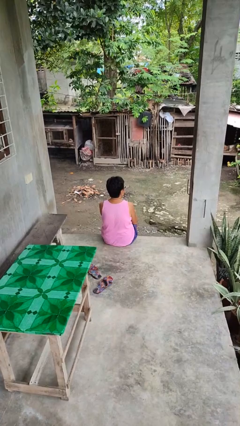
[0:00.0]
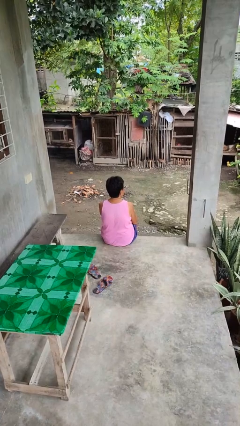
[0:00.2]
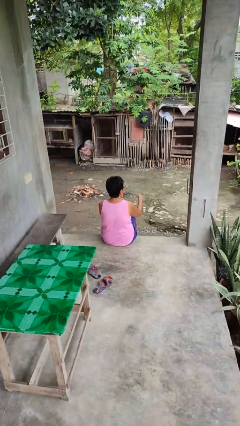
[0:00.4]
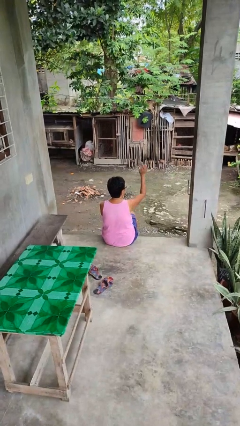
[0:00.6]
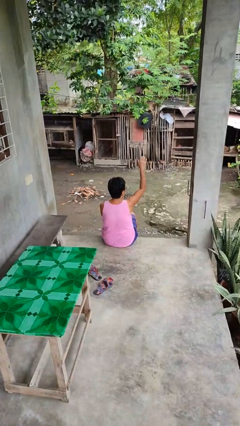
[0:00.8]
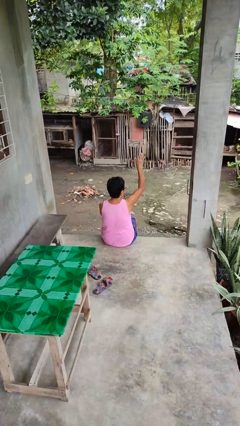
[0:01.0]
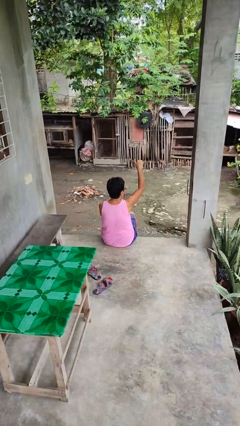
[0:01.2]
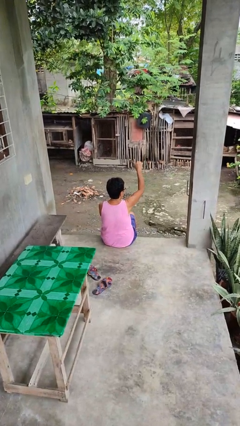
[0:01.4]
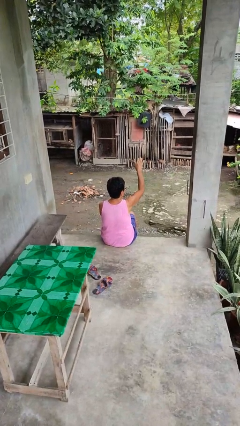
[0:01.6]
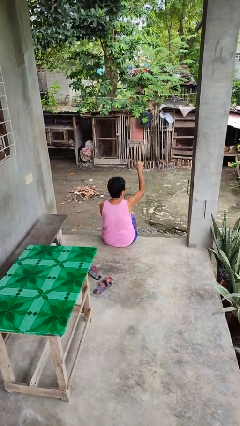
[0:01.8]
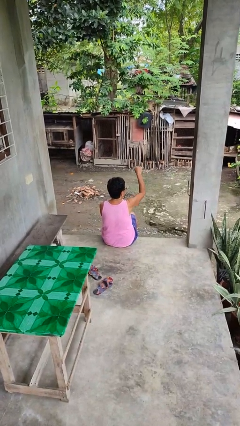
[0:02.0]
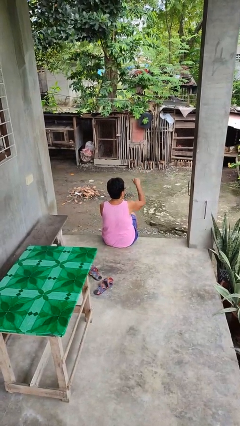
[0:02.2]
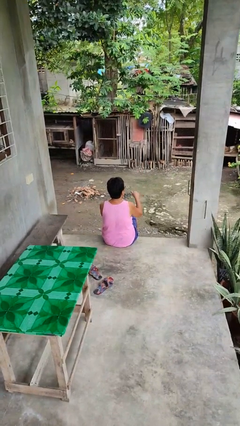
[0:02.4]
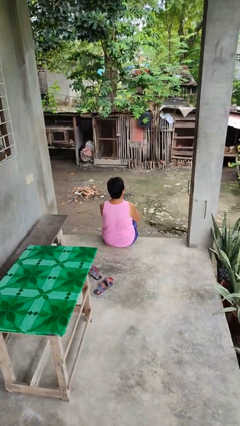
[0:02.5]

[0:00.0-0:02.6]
person gestures come here

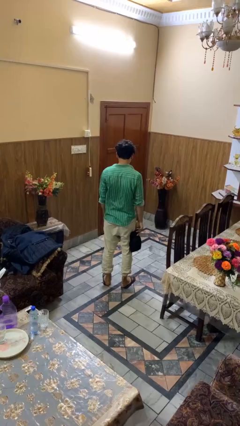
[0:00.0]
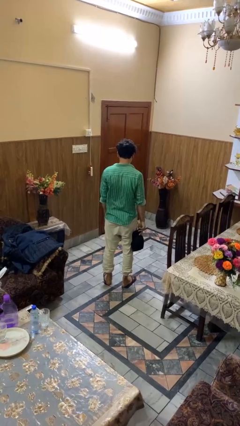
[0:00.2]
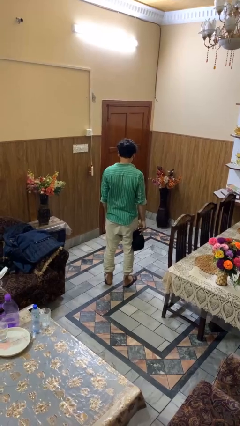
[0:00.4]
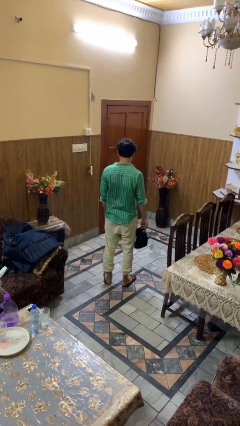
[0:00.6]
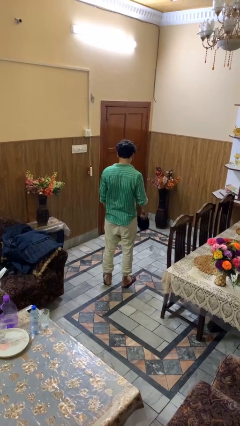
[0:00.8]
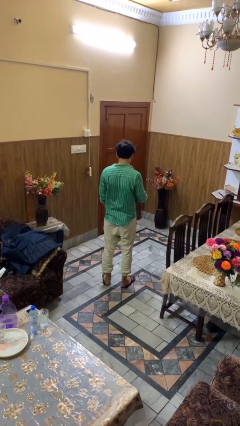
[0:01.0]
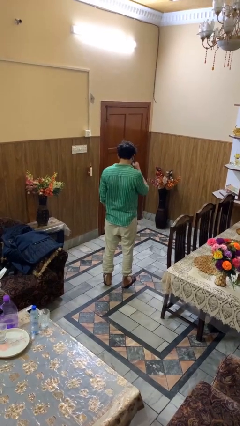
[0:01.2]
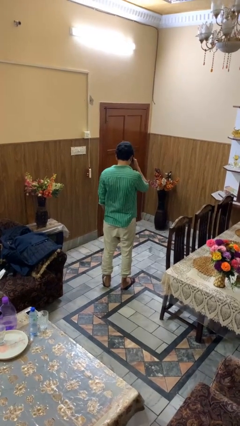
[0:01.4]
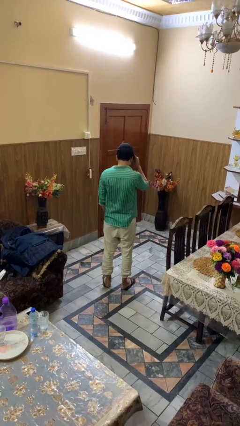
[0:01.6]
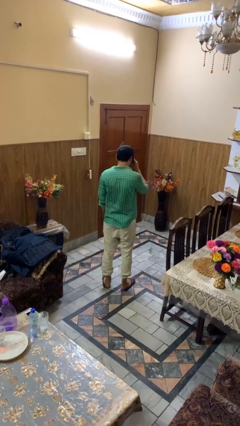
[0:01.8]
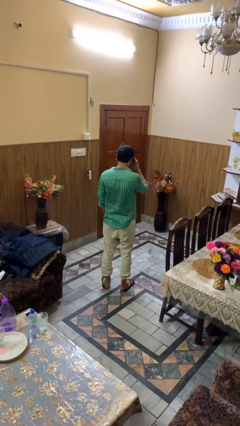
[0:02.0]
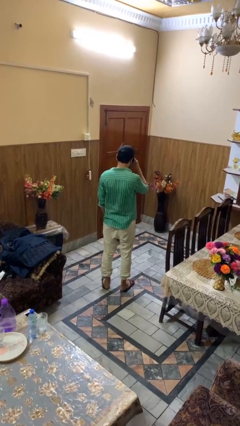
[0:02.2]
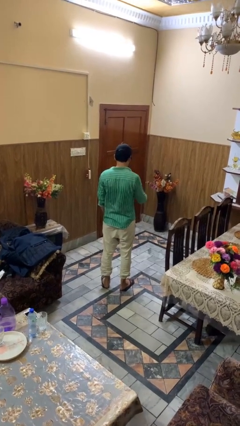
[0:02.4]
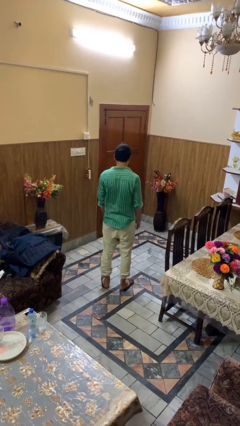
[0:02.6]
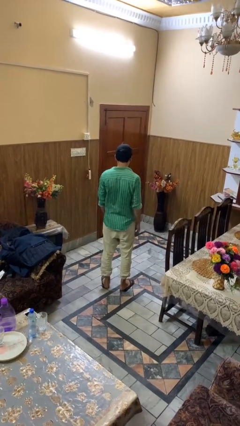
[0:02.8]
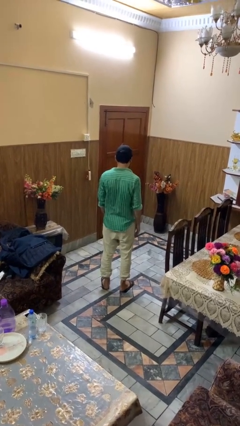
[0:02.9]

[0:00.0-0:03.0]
person puts on hat

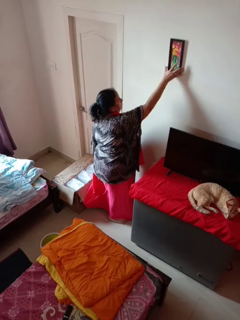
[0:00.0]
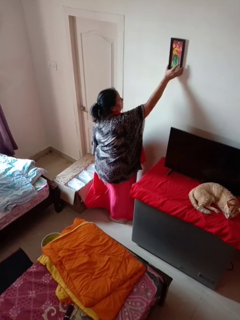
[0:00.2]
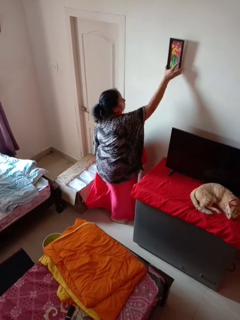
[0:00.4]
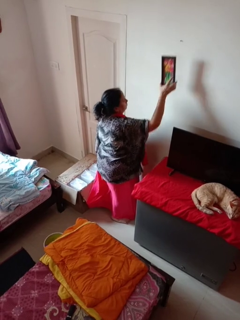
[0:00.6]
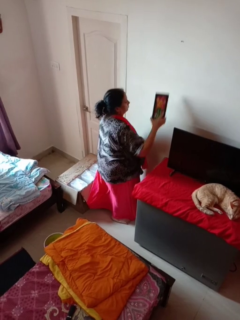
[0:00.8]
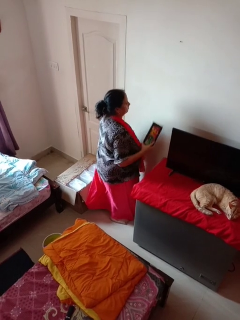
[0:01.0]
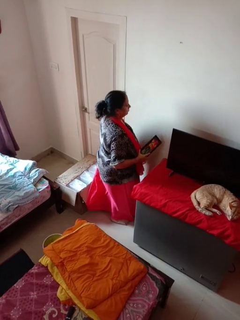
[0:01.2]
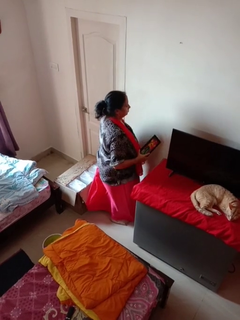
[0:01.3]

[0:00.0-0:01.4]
person takes down picture frame

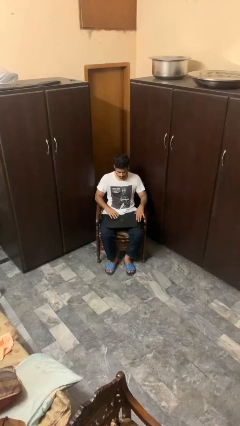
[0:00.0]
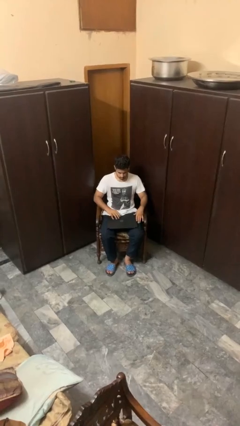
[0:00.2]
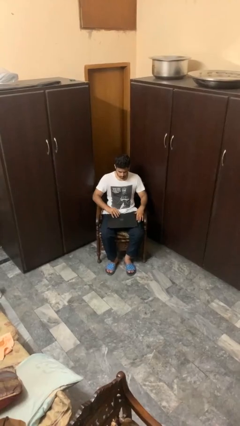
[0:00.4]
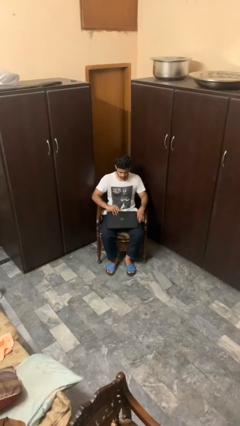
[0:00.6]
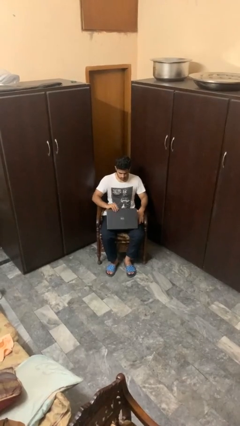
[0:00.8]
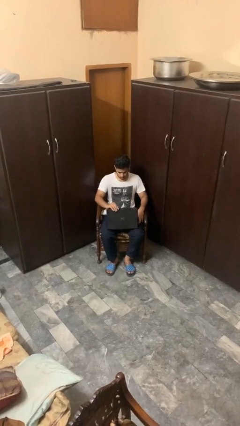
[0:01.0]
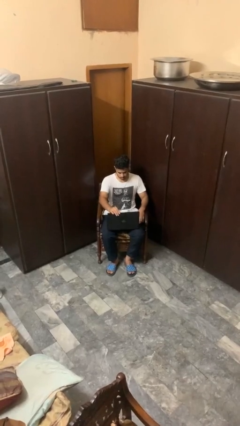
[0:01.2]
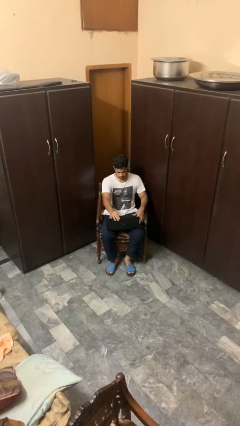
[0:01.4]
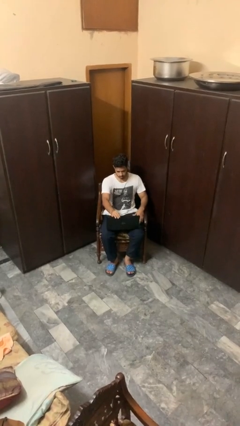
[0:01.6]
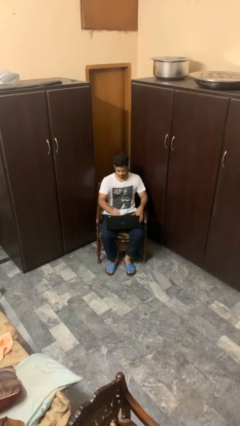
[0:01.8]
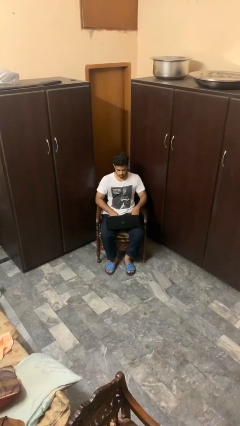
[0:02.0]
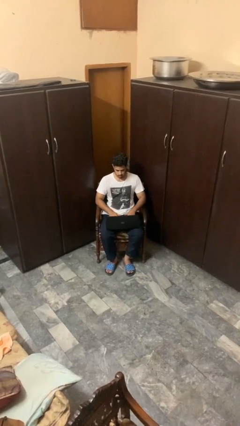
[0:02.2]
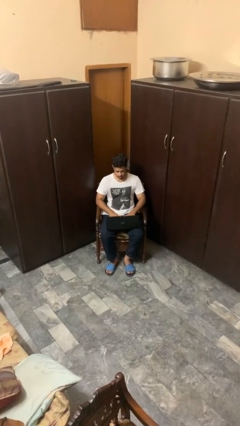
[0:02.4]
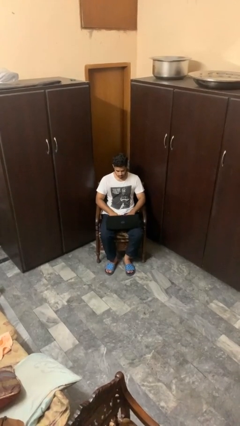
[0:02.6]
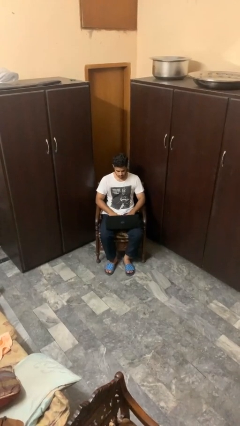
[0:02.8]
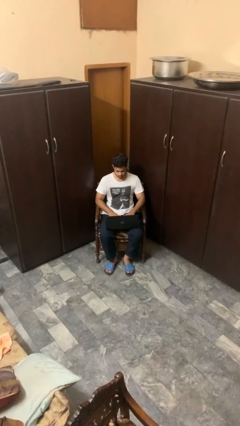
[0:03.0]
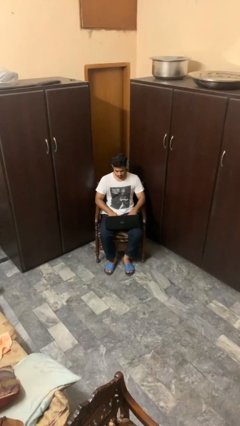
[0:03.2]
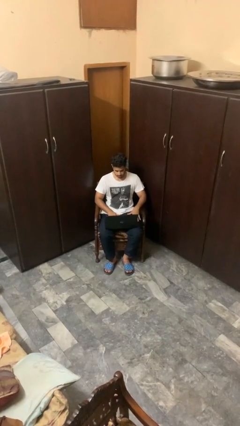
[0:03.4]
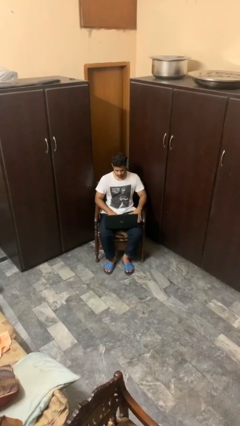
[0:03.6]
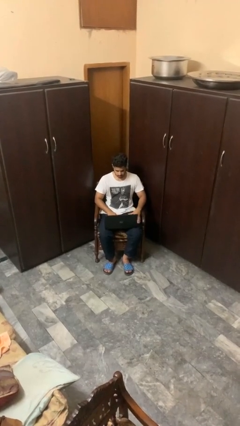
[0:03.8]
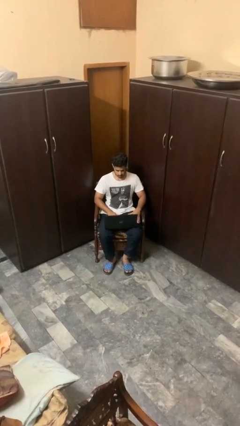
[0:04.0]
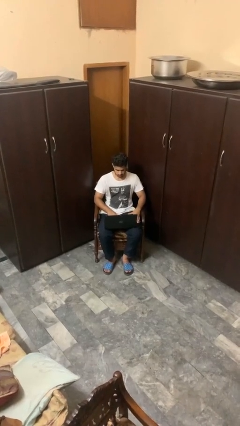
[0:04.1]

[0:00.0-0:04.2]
person opens laptop

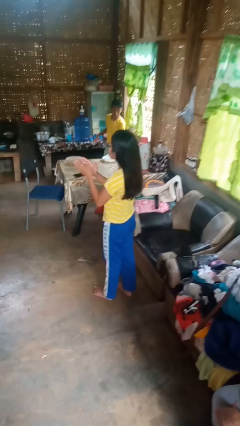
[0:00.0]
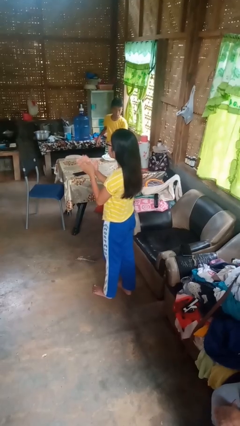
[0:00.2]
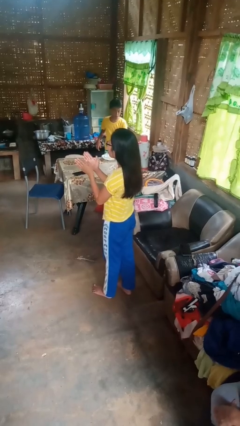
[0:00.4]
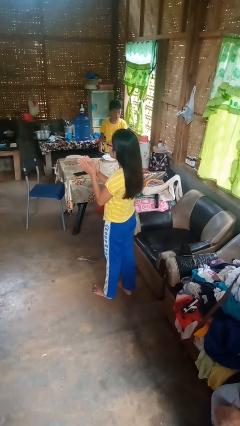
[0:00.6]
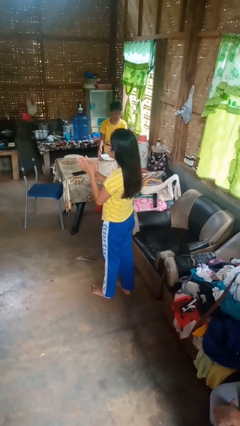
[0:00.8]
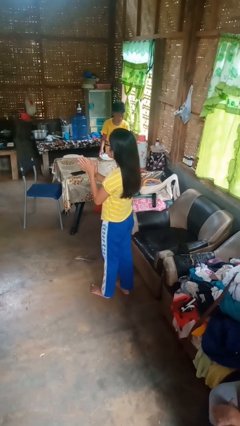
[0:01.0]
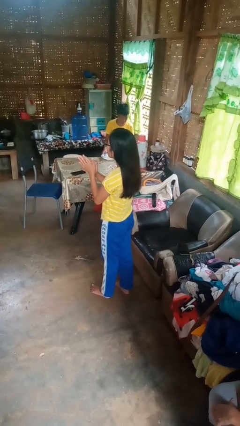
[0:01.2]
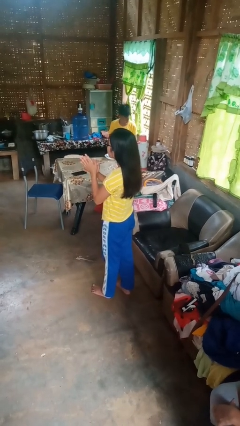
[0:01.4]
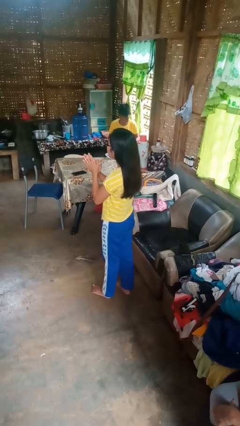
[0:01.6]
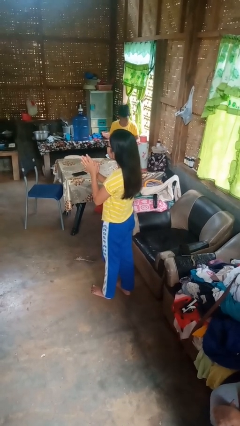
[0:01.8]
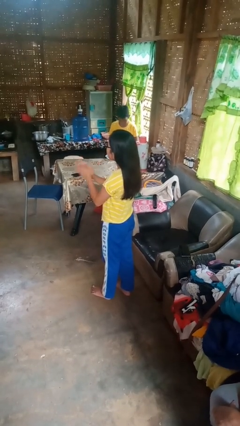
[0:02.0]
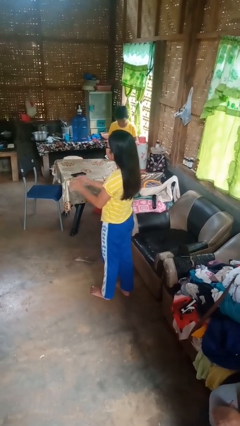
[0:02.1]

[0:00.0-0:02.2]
person claps hands

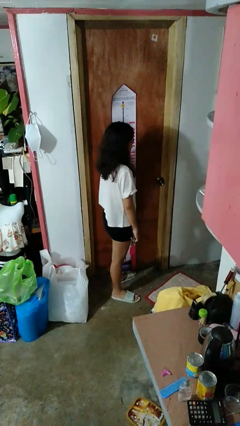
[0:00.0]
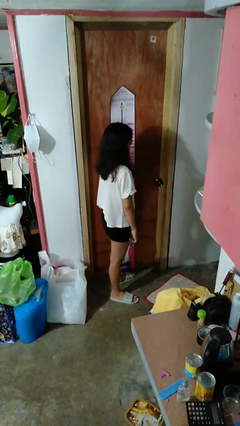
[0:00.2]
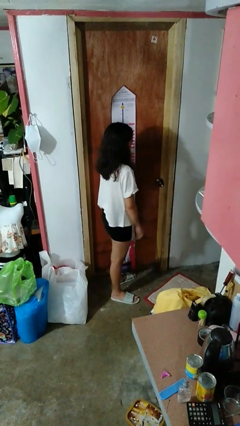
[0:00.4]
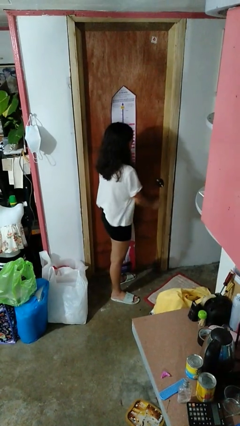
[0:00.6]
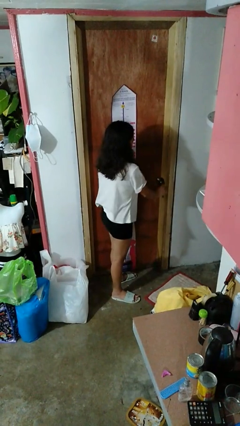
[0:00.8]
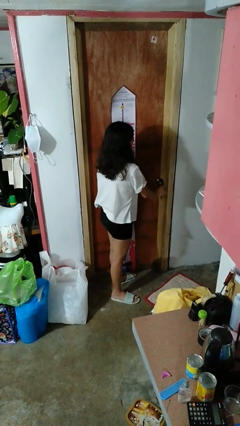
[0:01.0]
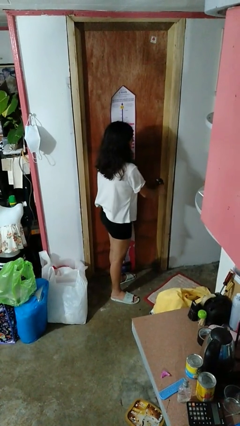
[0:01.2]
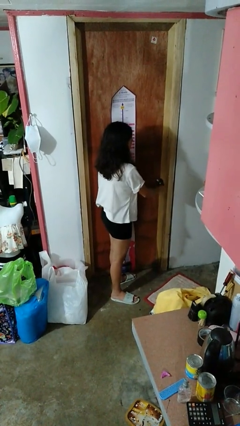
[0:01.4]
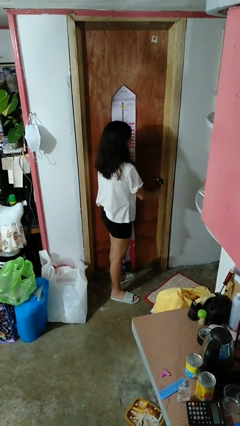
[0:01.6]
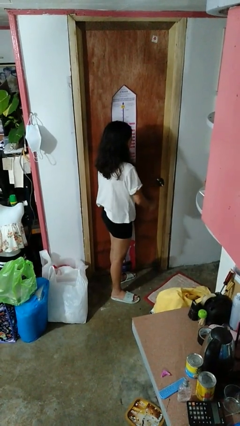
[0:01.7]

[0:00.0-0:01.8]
person locks door with keys

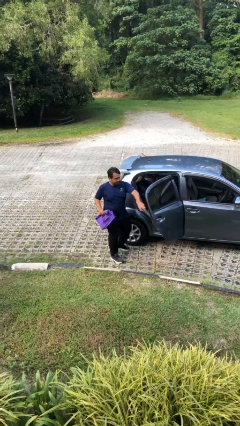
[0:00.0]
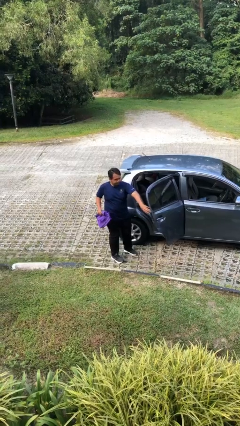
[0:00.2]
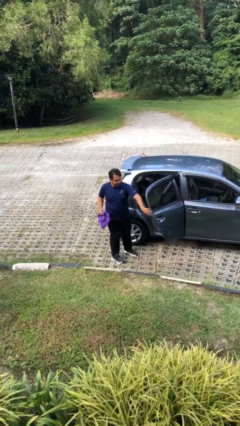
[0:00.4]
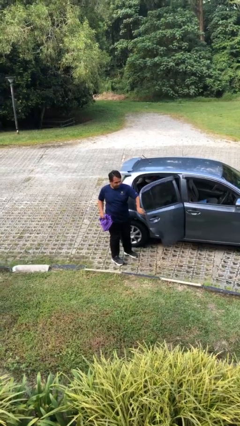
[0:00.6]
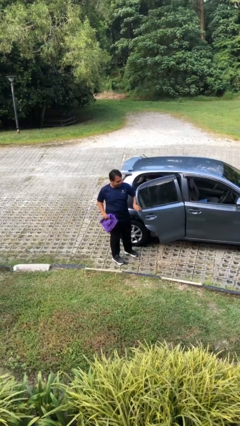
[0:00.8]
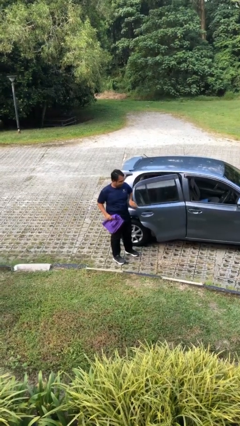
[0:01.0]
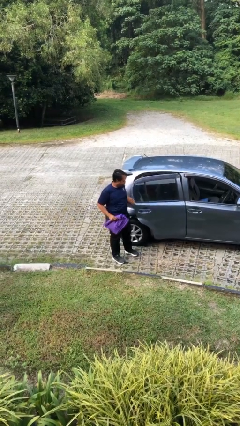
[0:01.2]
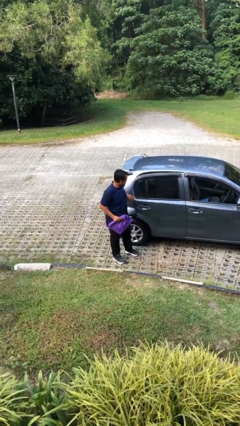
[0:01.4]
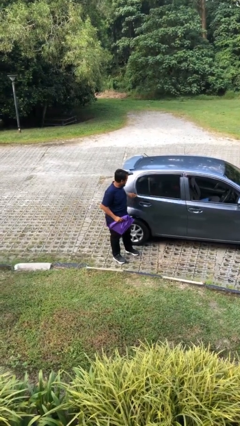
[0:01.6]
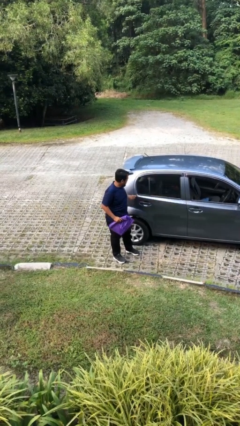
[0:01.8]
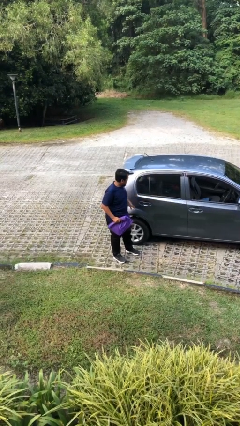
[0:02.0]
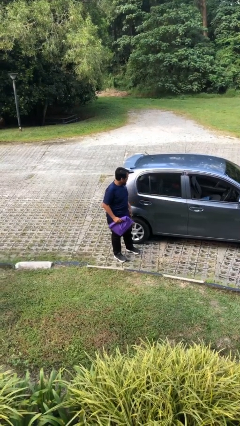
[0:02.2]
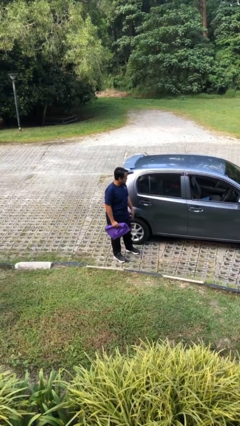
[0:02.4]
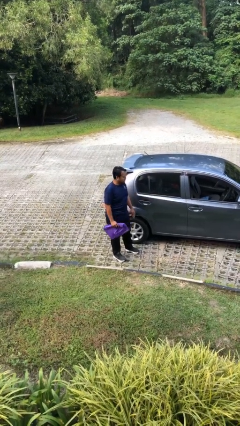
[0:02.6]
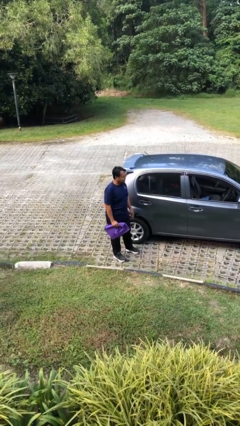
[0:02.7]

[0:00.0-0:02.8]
person closes car door
